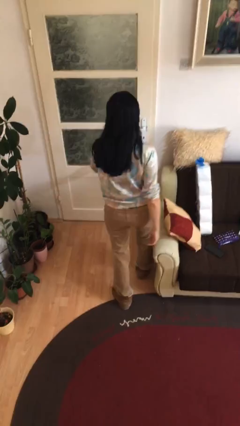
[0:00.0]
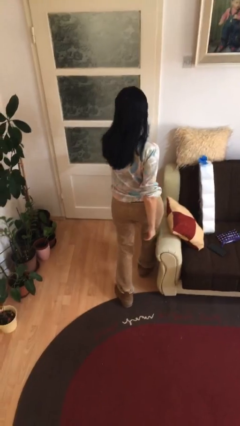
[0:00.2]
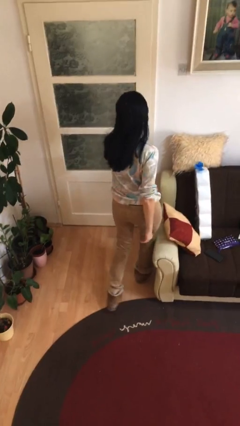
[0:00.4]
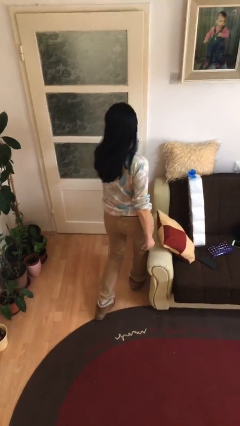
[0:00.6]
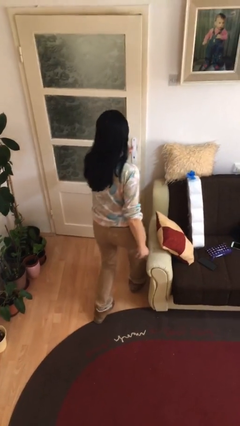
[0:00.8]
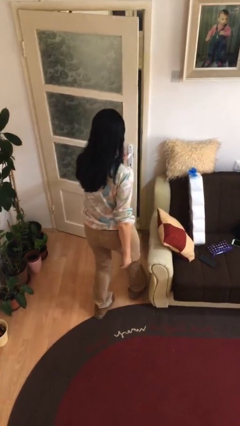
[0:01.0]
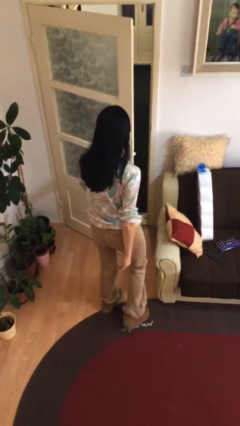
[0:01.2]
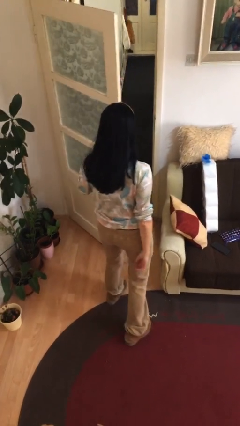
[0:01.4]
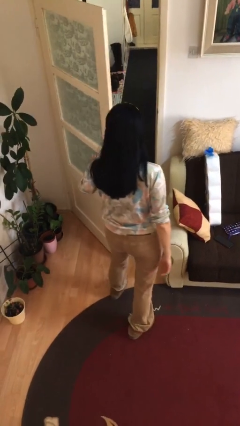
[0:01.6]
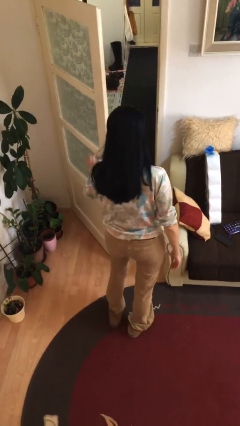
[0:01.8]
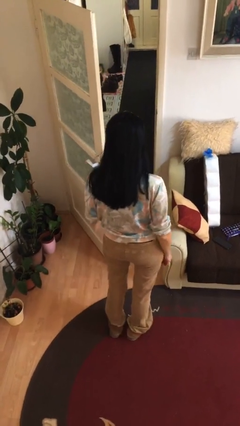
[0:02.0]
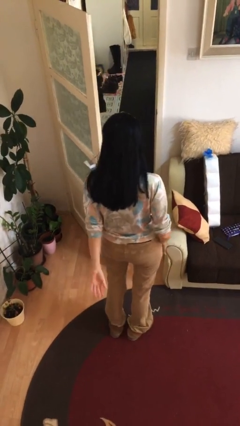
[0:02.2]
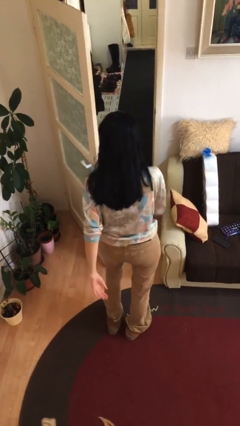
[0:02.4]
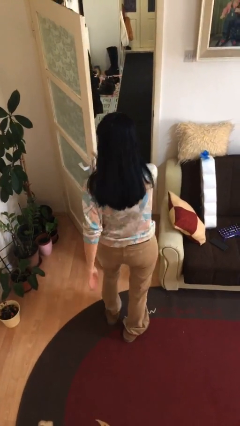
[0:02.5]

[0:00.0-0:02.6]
person opens facility door

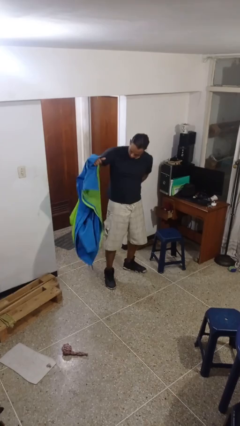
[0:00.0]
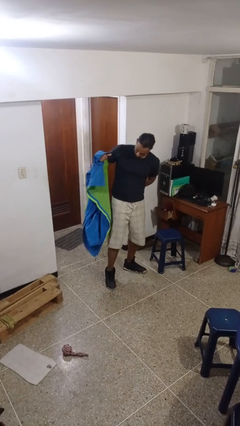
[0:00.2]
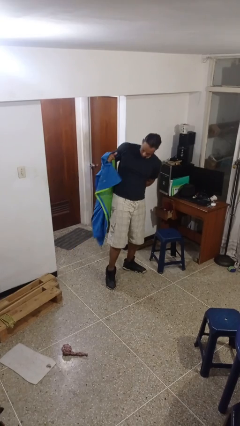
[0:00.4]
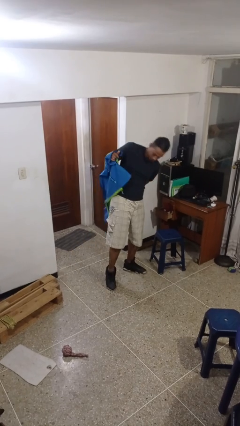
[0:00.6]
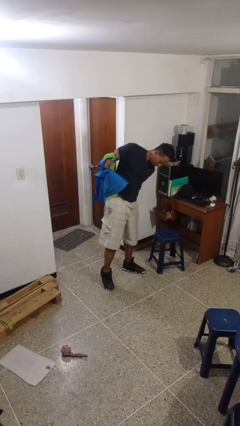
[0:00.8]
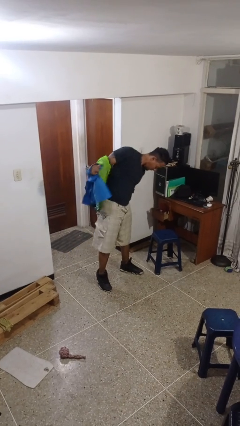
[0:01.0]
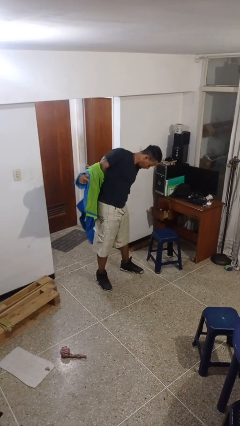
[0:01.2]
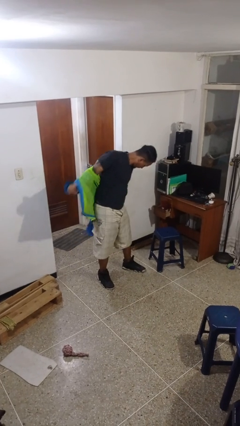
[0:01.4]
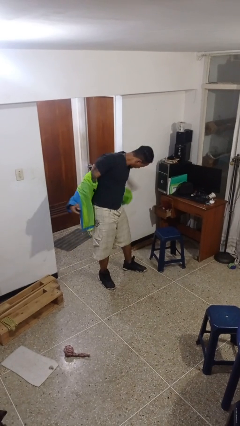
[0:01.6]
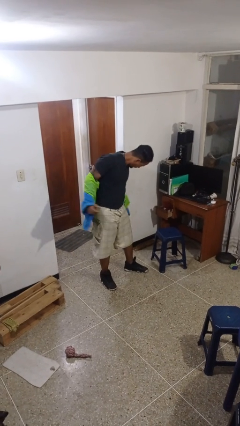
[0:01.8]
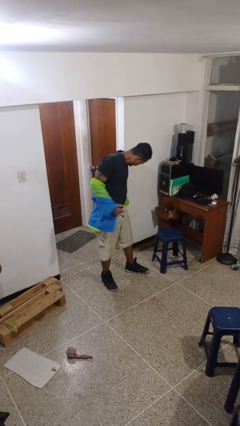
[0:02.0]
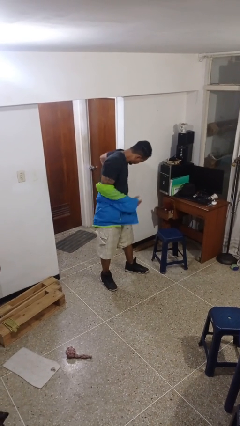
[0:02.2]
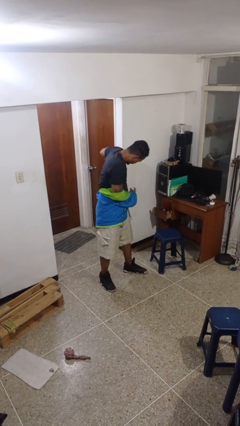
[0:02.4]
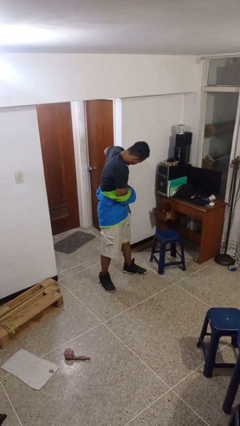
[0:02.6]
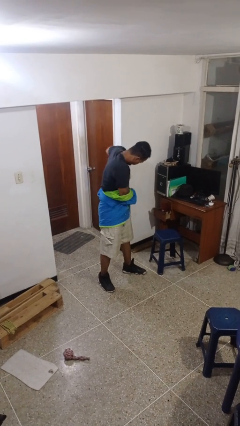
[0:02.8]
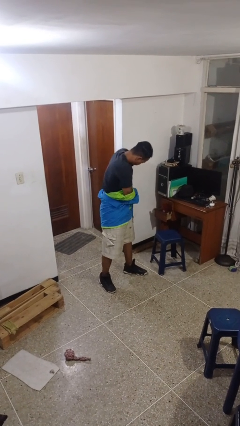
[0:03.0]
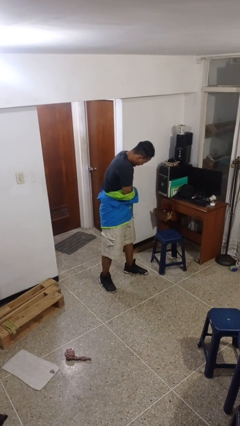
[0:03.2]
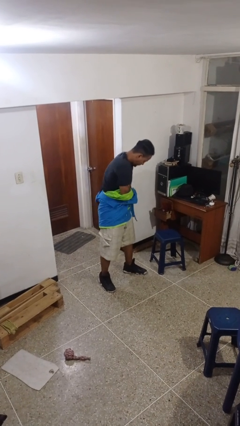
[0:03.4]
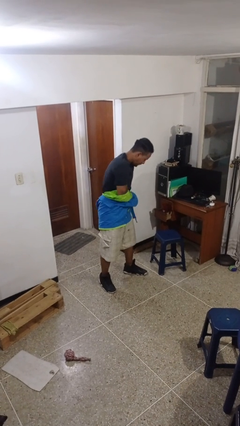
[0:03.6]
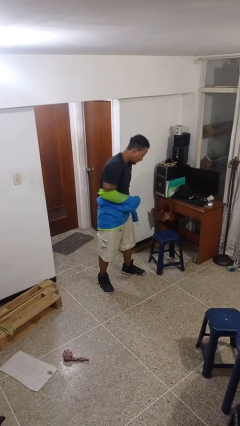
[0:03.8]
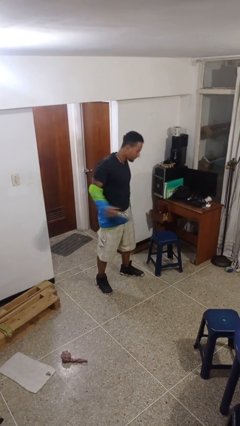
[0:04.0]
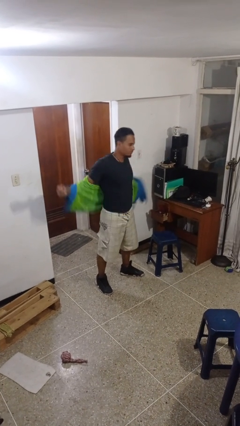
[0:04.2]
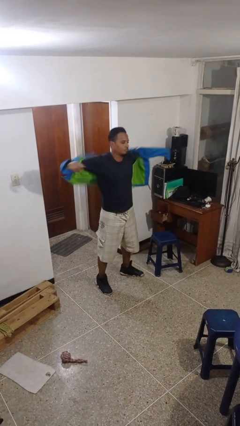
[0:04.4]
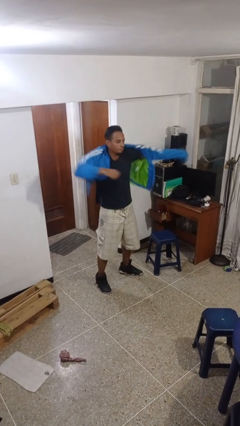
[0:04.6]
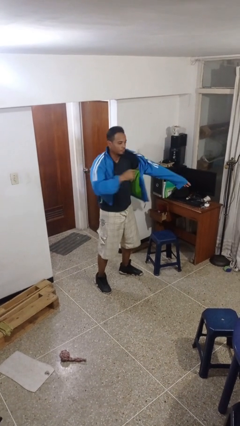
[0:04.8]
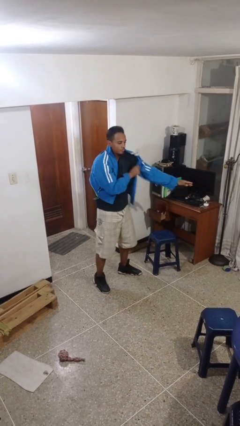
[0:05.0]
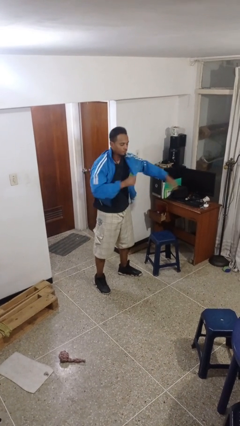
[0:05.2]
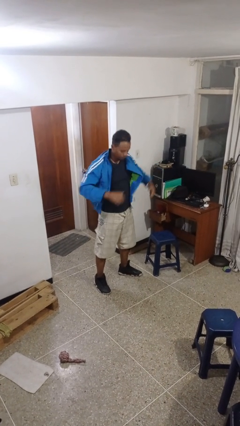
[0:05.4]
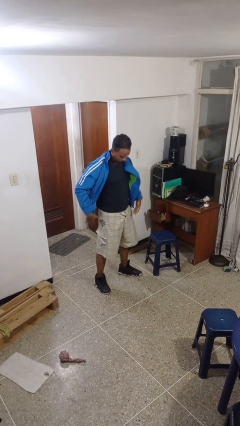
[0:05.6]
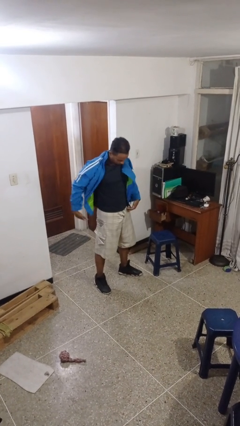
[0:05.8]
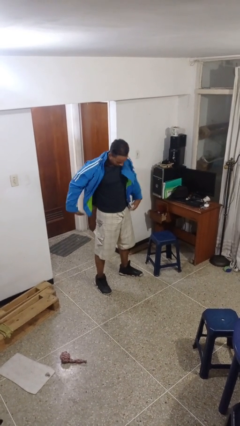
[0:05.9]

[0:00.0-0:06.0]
person puts on jacket

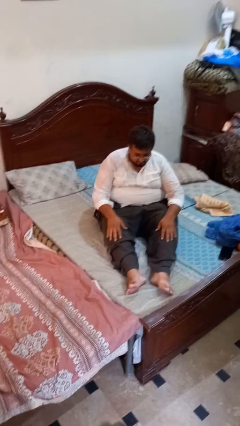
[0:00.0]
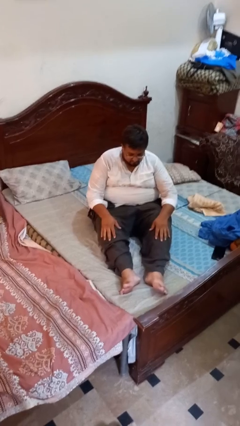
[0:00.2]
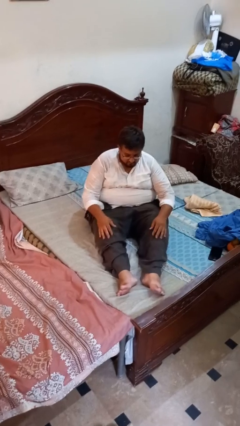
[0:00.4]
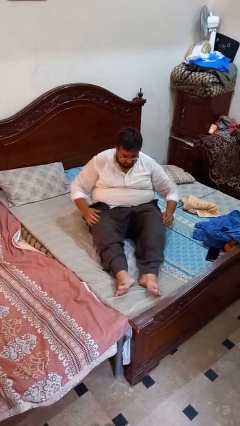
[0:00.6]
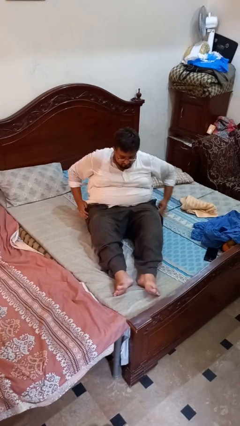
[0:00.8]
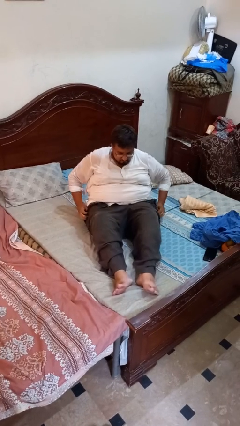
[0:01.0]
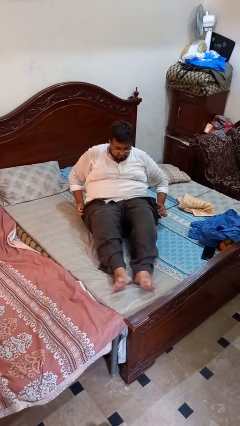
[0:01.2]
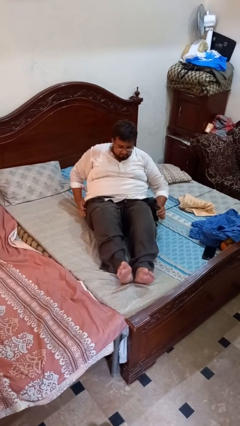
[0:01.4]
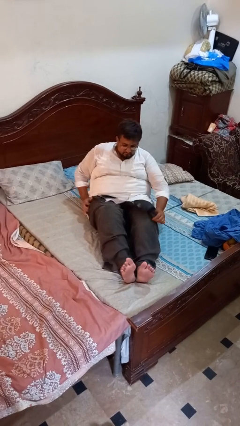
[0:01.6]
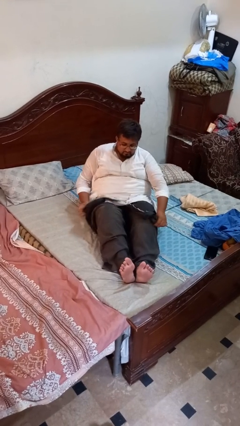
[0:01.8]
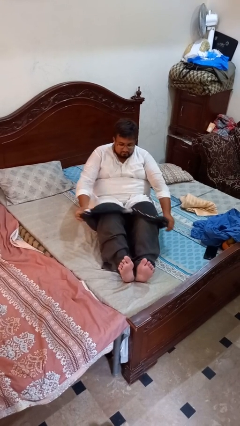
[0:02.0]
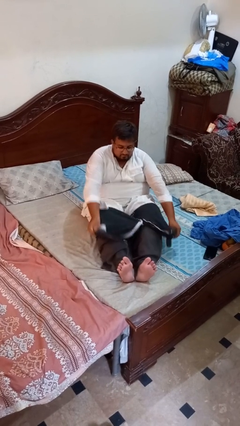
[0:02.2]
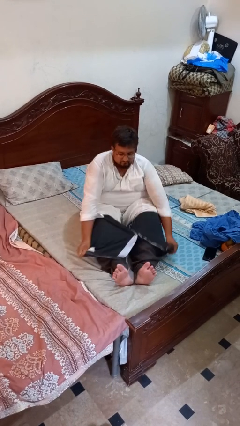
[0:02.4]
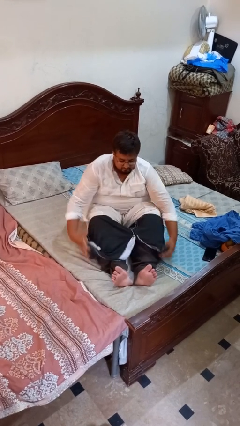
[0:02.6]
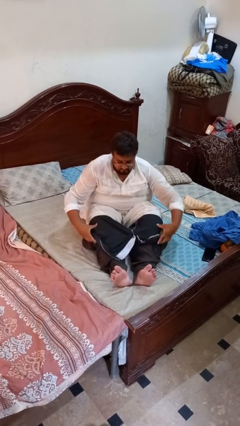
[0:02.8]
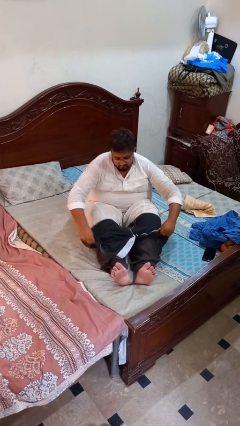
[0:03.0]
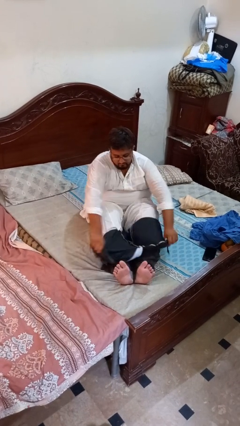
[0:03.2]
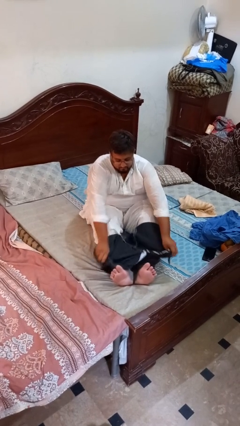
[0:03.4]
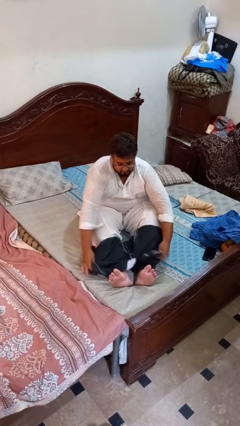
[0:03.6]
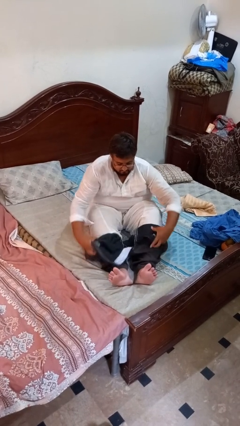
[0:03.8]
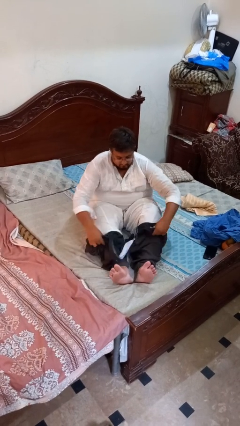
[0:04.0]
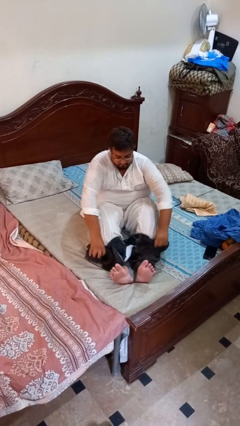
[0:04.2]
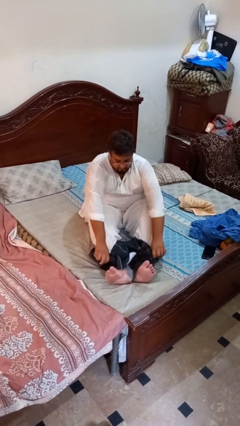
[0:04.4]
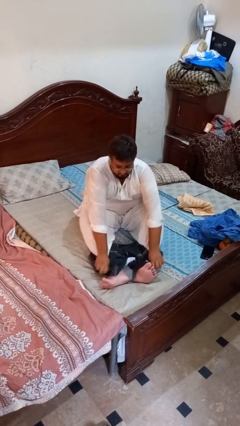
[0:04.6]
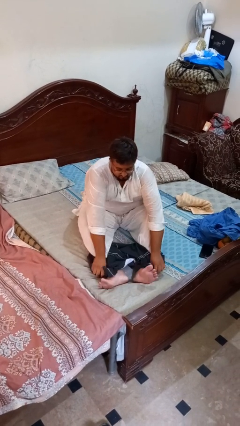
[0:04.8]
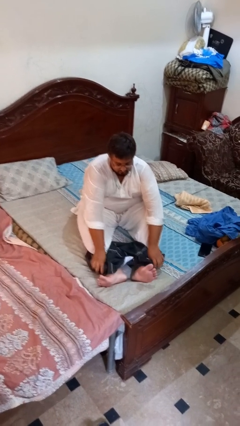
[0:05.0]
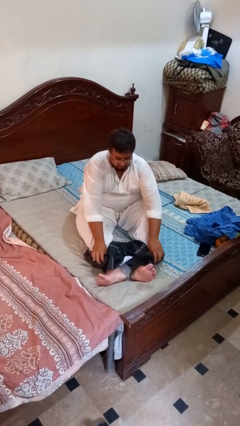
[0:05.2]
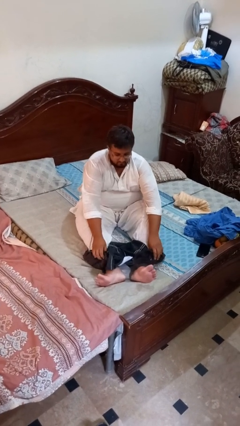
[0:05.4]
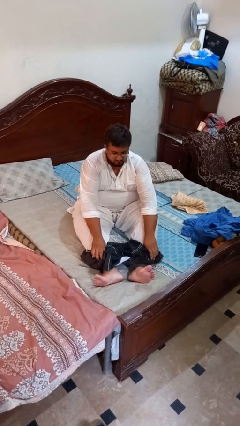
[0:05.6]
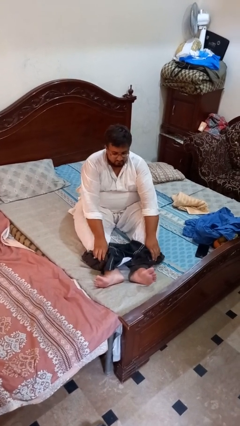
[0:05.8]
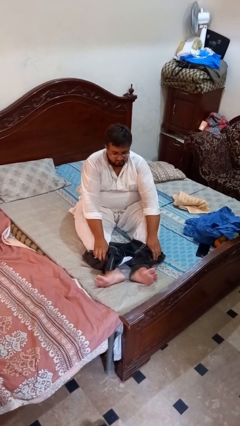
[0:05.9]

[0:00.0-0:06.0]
person takes off pants

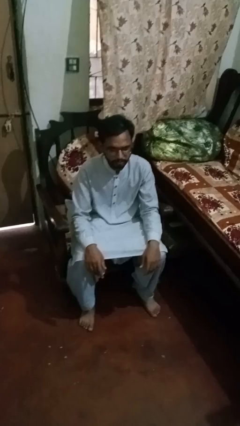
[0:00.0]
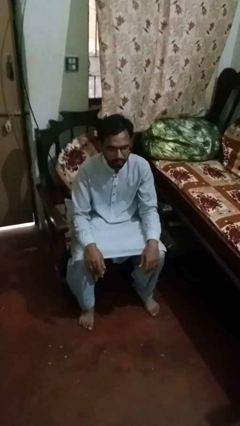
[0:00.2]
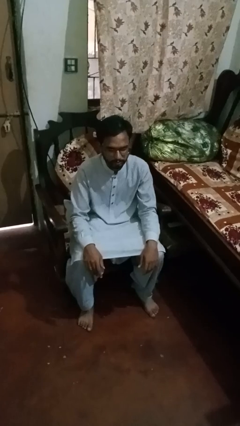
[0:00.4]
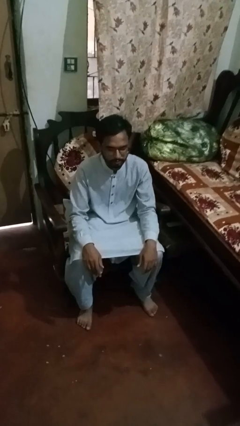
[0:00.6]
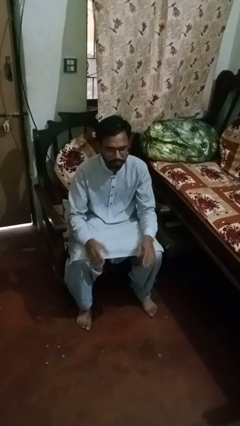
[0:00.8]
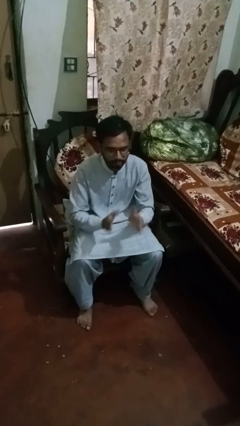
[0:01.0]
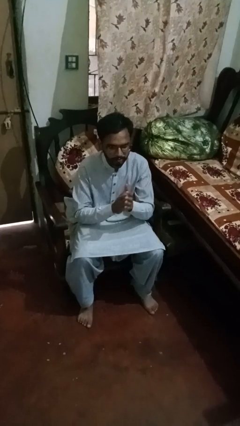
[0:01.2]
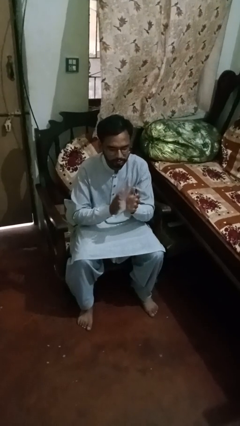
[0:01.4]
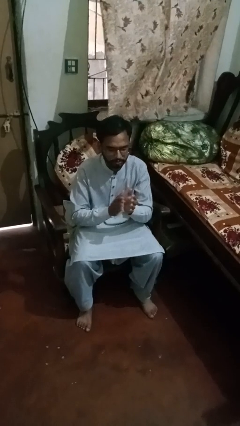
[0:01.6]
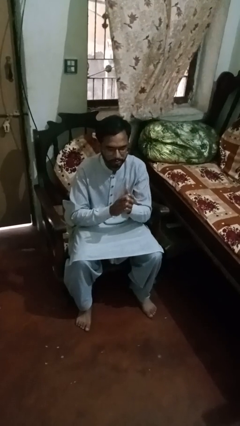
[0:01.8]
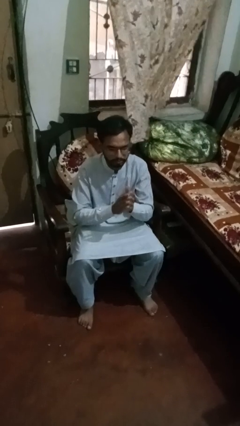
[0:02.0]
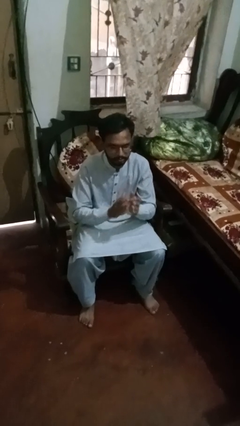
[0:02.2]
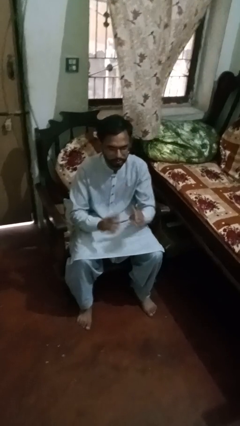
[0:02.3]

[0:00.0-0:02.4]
person claps hands

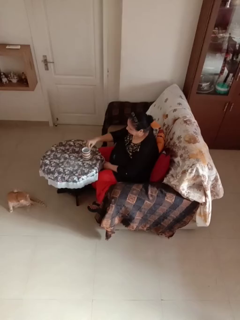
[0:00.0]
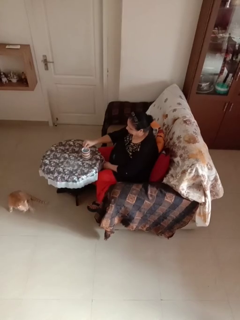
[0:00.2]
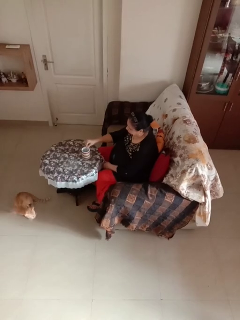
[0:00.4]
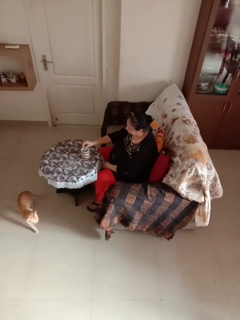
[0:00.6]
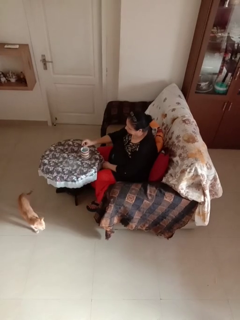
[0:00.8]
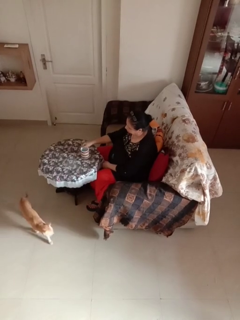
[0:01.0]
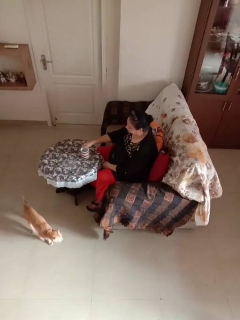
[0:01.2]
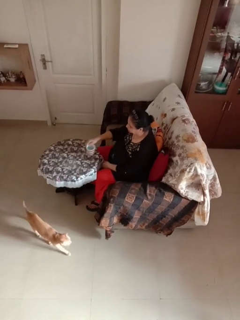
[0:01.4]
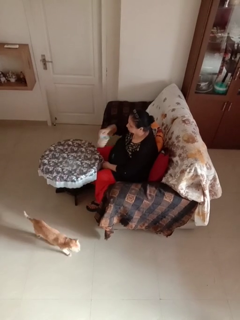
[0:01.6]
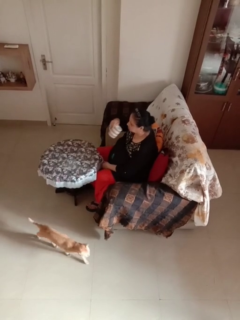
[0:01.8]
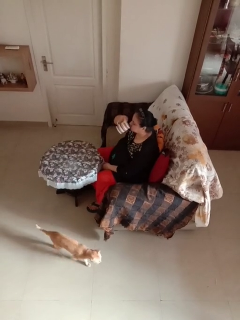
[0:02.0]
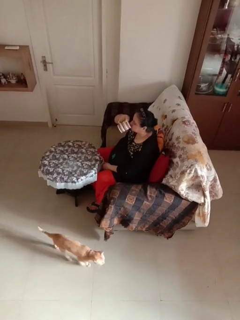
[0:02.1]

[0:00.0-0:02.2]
person stirs mug
